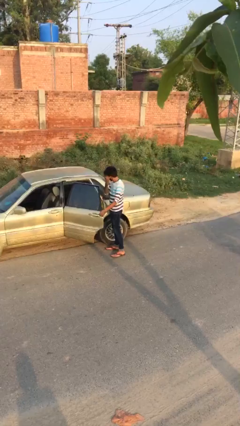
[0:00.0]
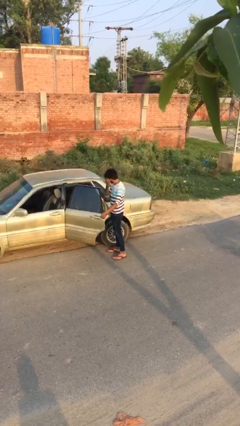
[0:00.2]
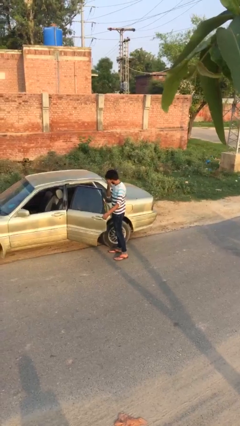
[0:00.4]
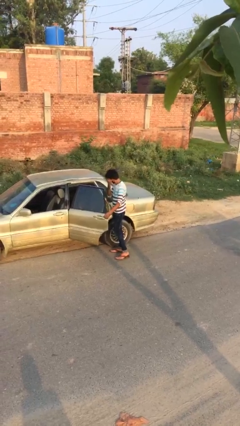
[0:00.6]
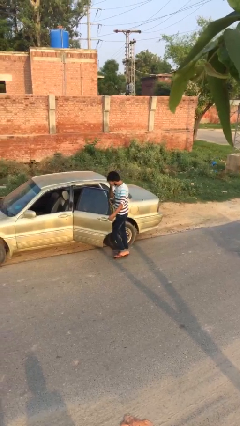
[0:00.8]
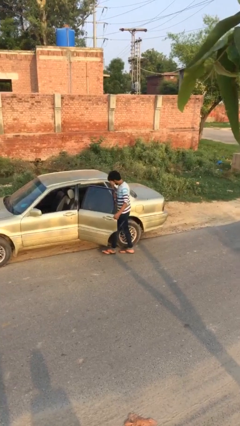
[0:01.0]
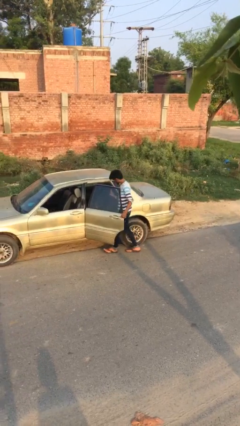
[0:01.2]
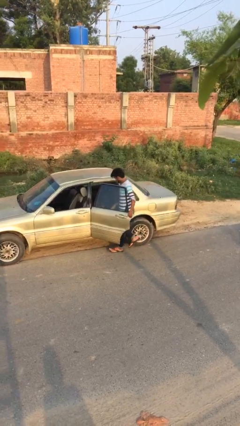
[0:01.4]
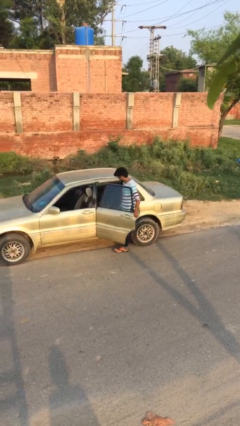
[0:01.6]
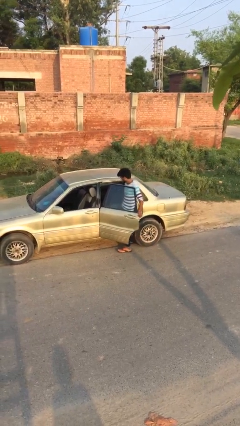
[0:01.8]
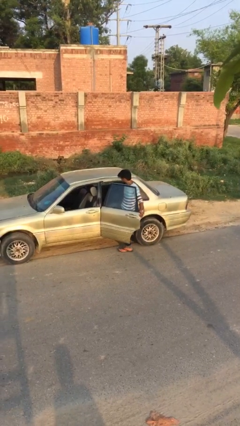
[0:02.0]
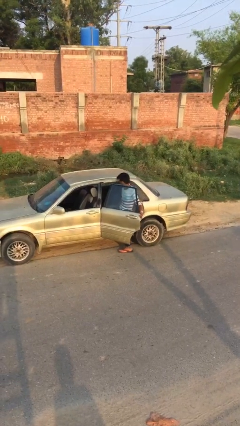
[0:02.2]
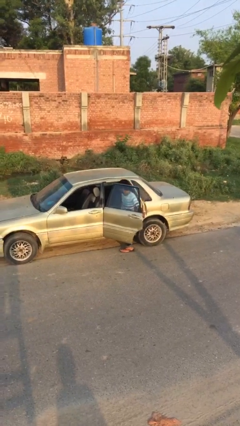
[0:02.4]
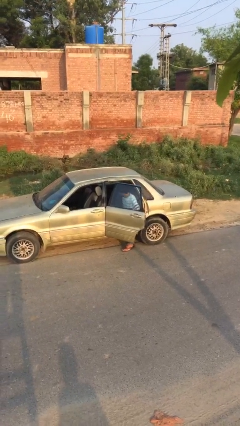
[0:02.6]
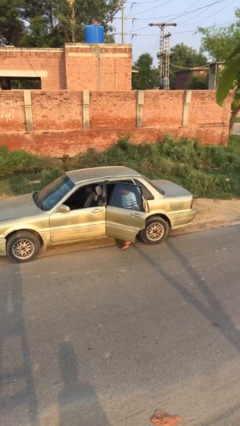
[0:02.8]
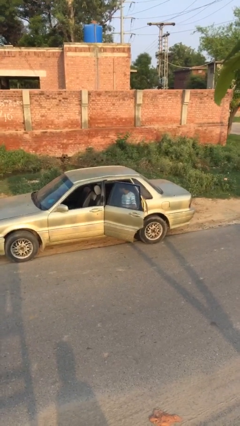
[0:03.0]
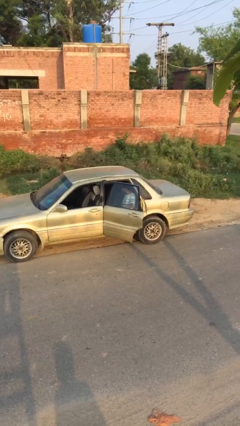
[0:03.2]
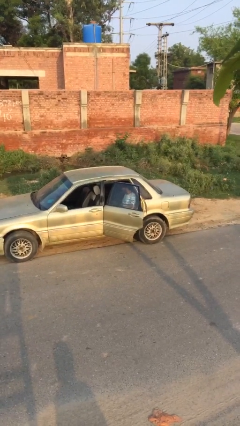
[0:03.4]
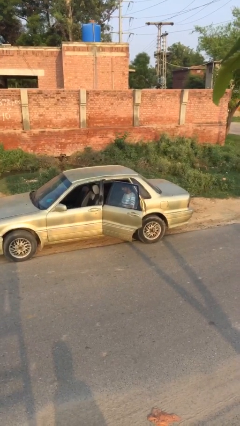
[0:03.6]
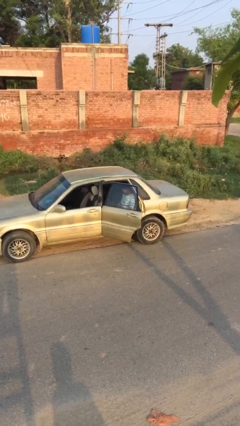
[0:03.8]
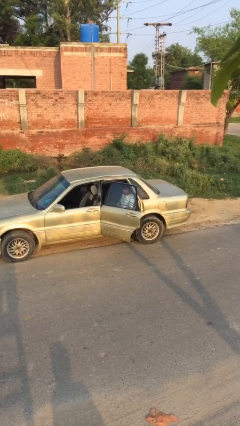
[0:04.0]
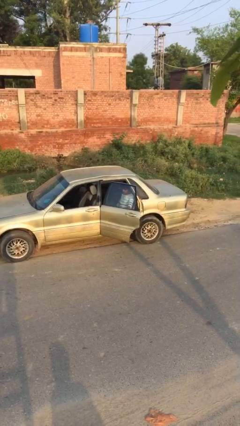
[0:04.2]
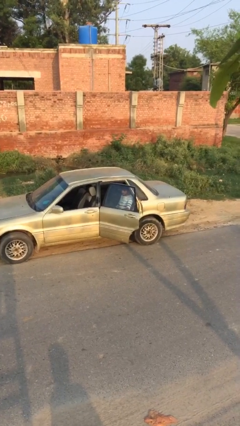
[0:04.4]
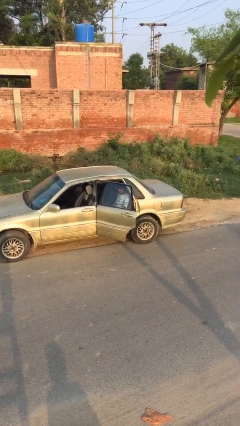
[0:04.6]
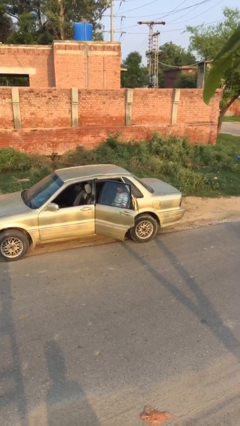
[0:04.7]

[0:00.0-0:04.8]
person enters car

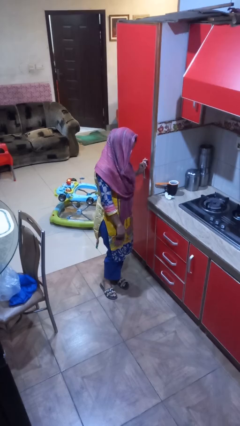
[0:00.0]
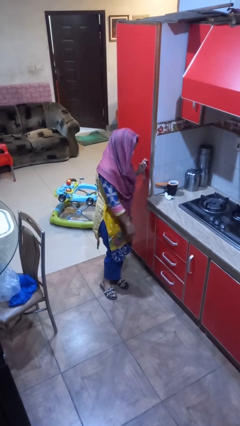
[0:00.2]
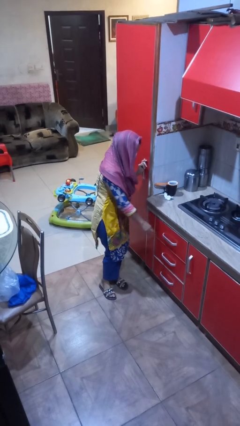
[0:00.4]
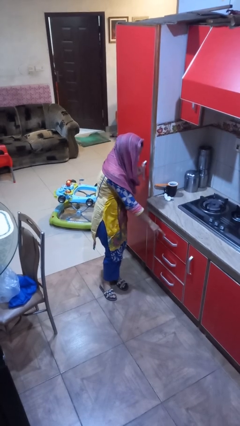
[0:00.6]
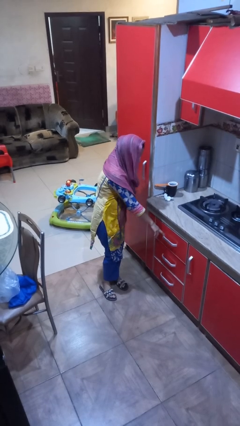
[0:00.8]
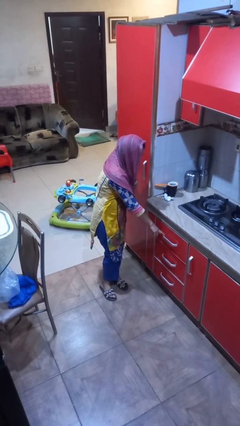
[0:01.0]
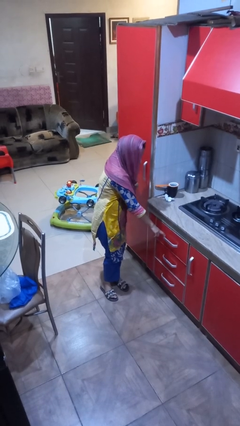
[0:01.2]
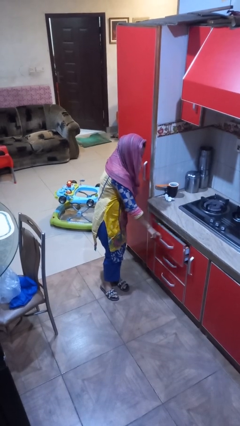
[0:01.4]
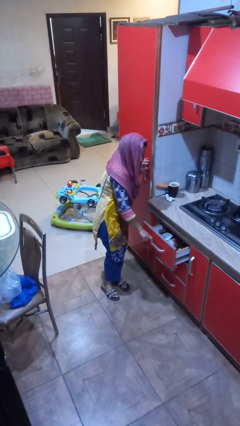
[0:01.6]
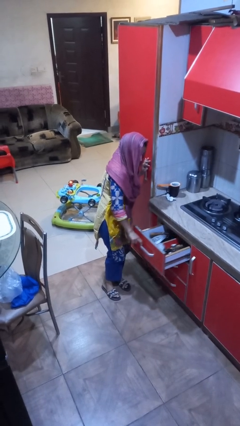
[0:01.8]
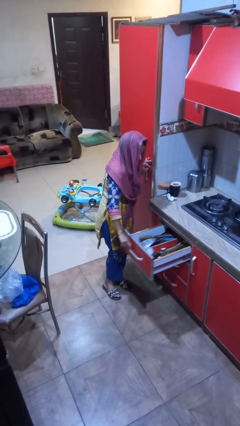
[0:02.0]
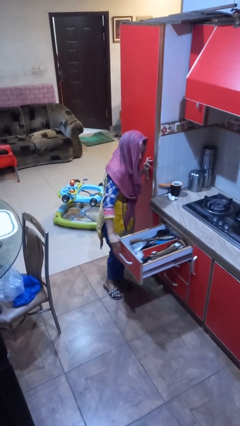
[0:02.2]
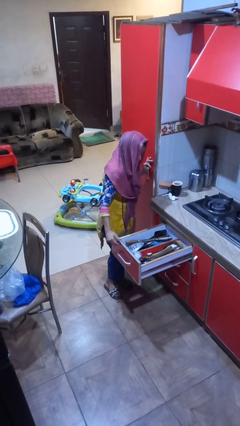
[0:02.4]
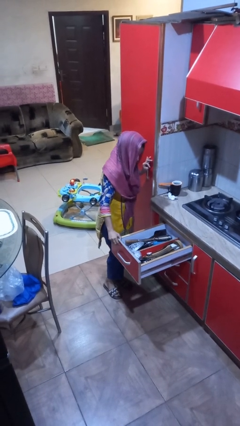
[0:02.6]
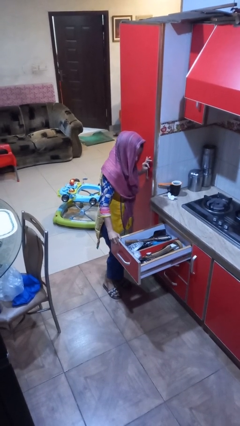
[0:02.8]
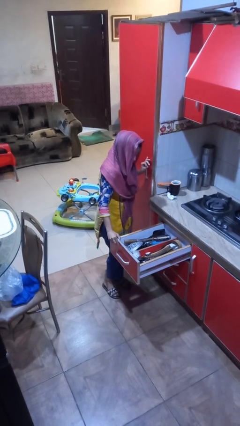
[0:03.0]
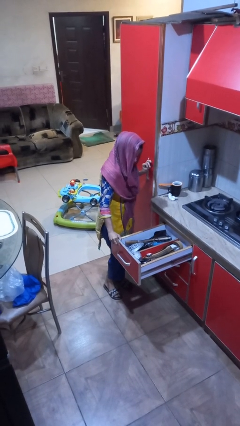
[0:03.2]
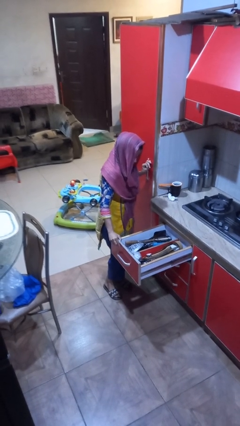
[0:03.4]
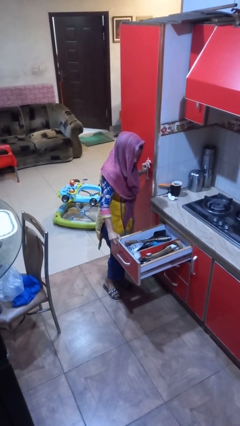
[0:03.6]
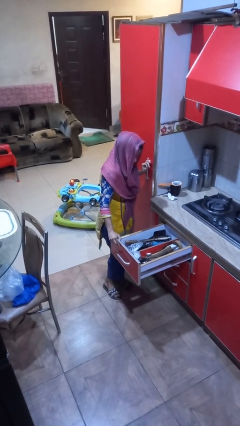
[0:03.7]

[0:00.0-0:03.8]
person opens kitchen drawer

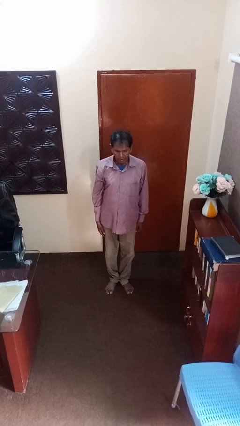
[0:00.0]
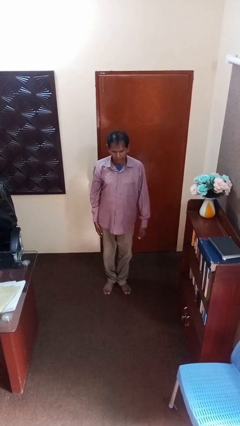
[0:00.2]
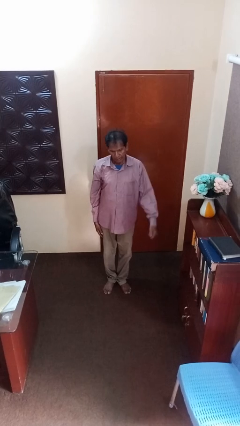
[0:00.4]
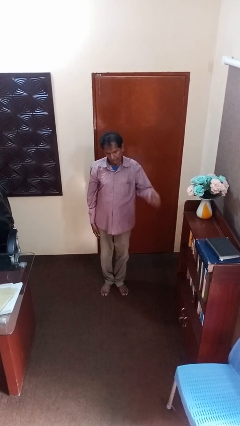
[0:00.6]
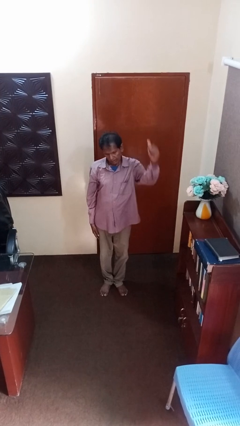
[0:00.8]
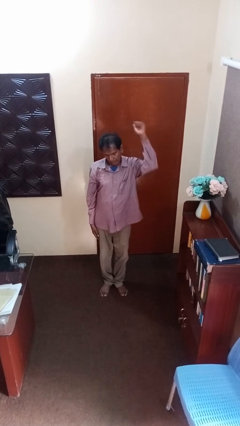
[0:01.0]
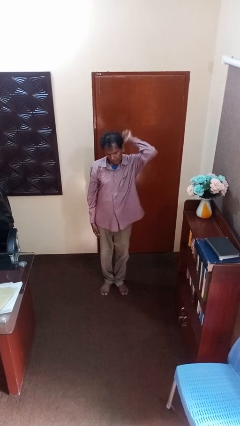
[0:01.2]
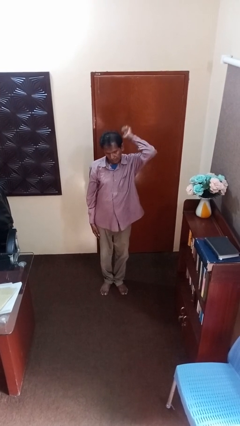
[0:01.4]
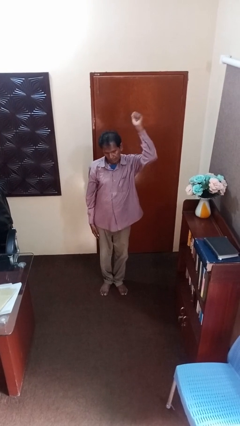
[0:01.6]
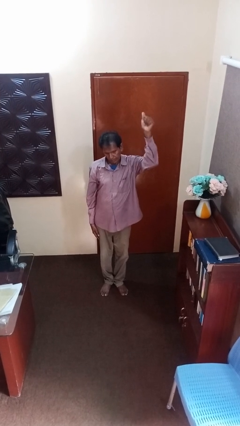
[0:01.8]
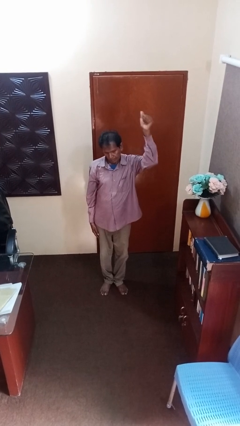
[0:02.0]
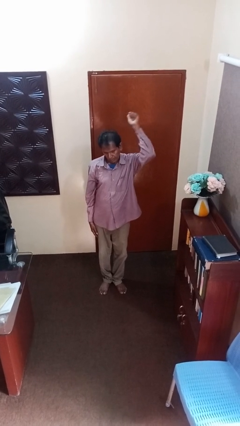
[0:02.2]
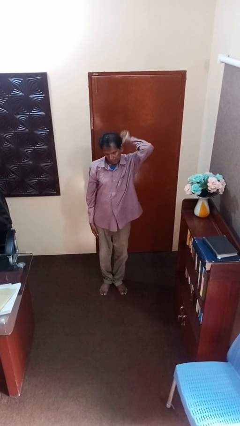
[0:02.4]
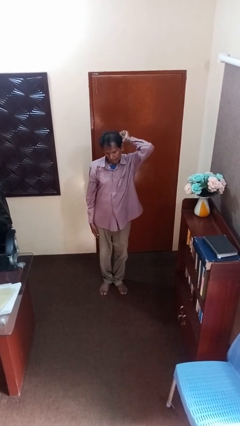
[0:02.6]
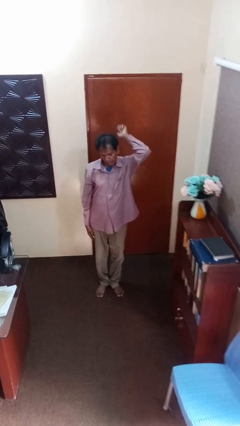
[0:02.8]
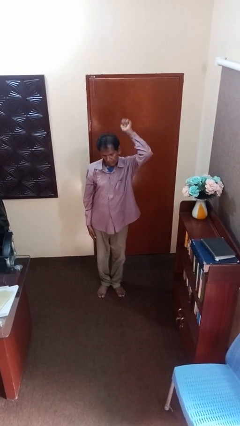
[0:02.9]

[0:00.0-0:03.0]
person gestures behind me

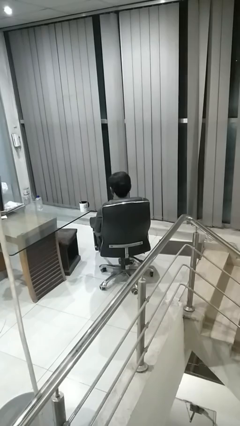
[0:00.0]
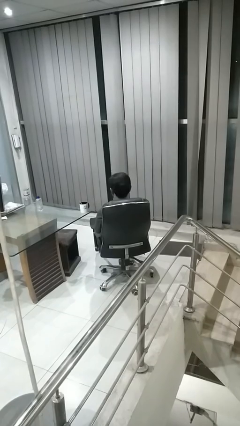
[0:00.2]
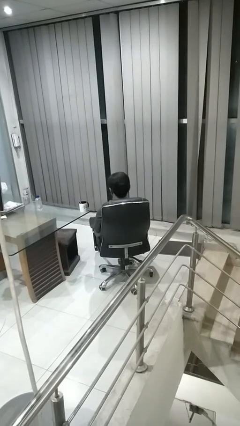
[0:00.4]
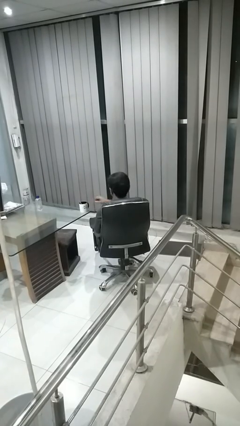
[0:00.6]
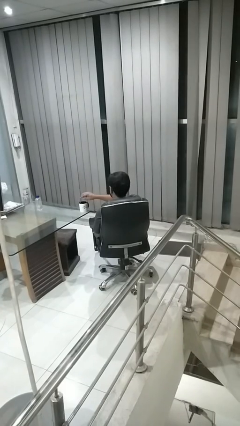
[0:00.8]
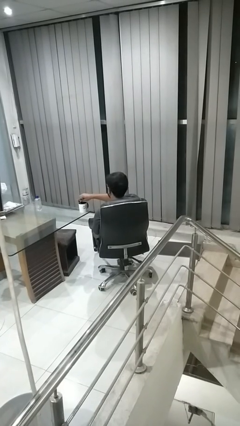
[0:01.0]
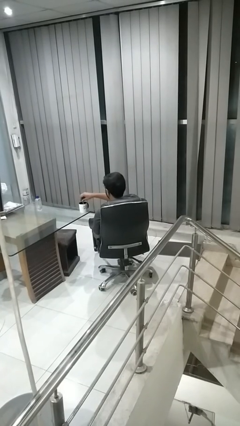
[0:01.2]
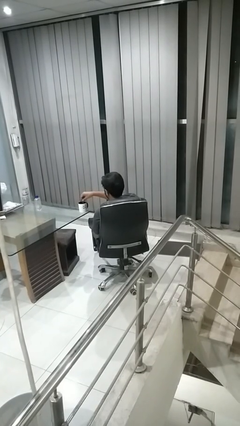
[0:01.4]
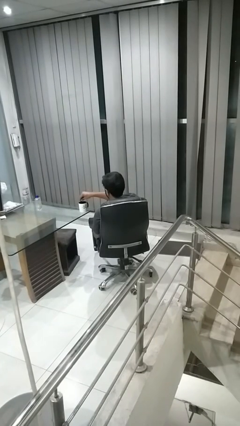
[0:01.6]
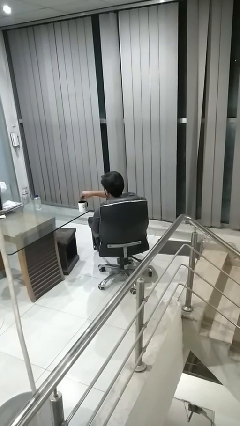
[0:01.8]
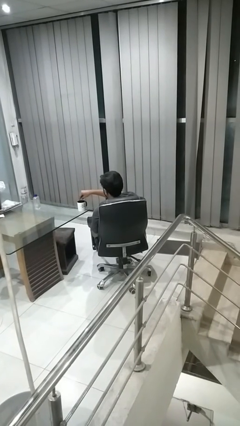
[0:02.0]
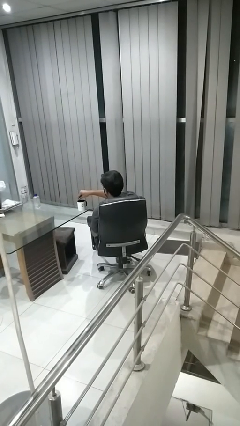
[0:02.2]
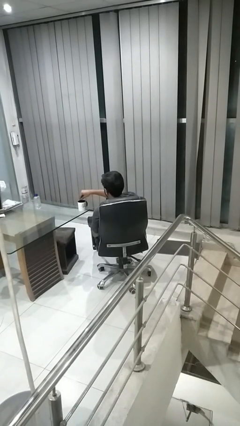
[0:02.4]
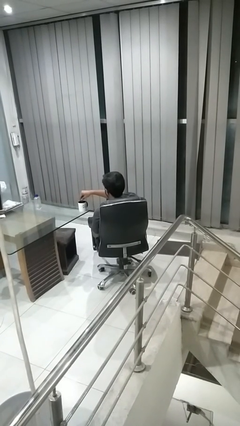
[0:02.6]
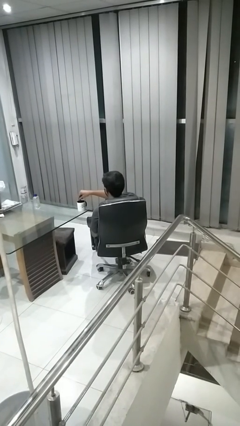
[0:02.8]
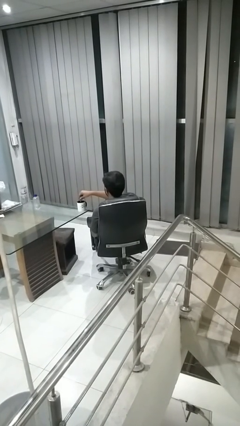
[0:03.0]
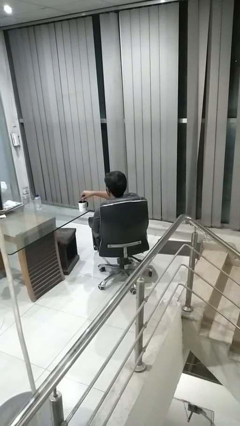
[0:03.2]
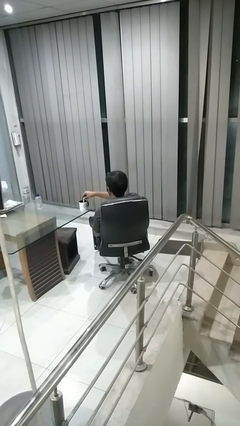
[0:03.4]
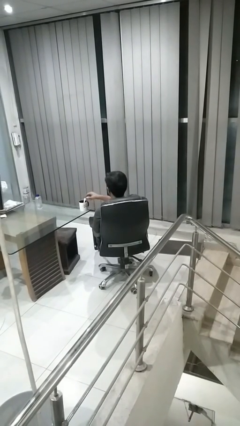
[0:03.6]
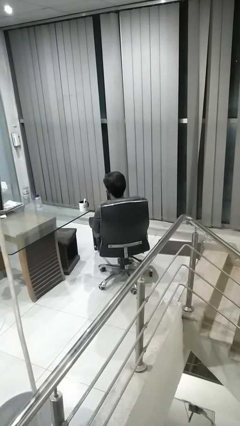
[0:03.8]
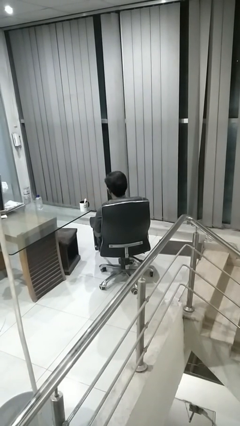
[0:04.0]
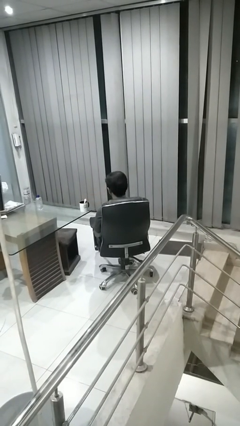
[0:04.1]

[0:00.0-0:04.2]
person stirs mug

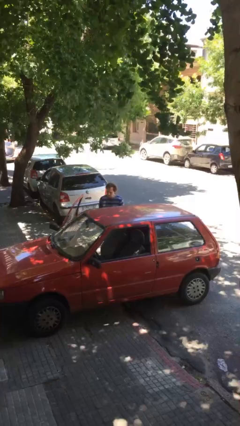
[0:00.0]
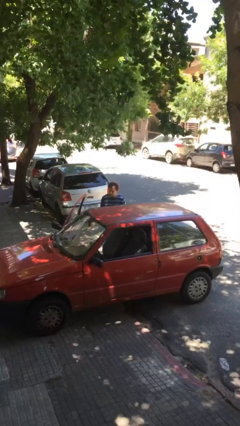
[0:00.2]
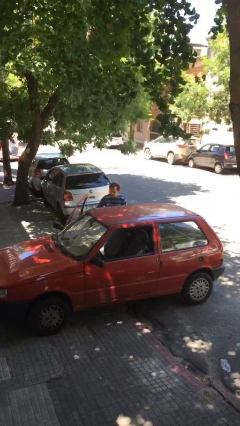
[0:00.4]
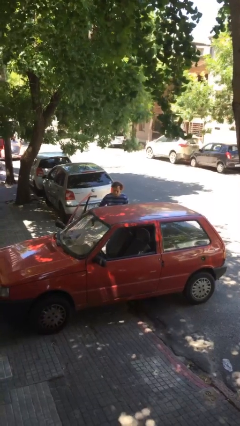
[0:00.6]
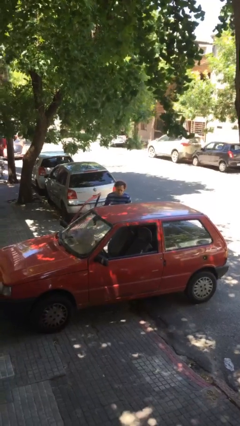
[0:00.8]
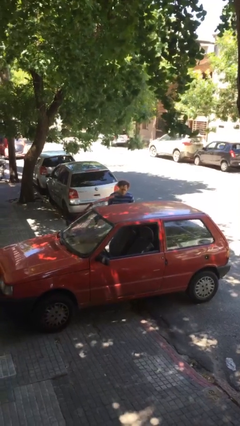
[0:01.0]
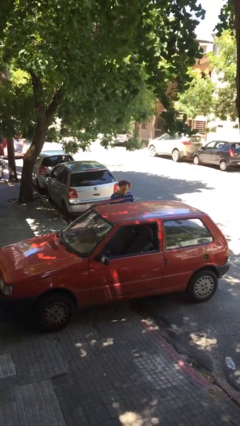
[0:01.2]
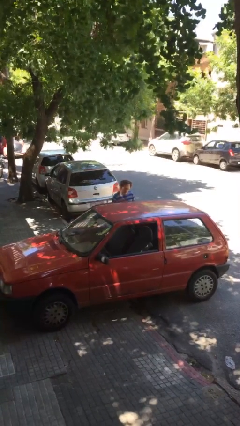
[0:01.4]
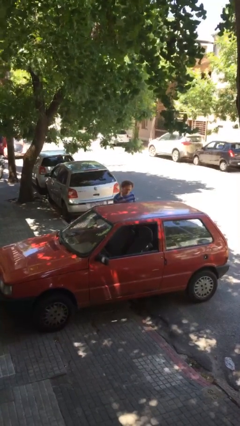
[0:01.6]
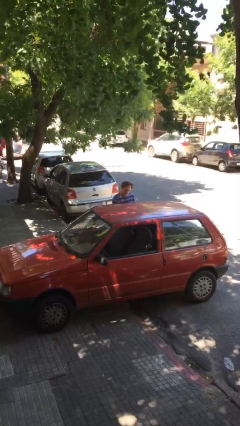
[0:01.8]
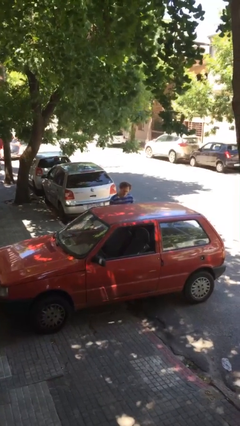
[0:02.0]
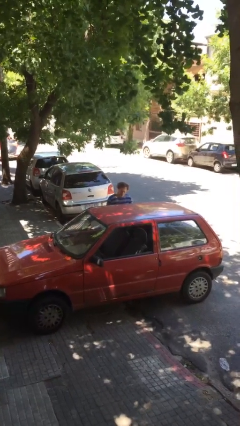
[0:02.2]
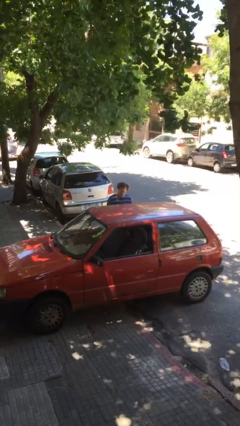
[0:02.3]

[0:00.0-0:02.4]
person closes car door
